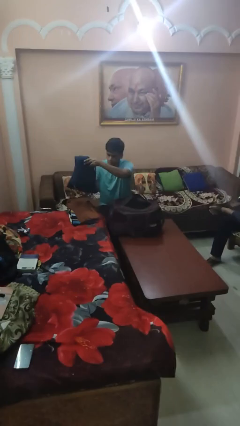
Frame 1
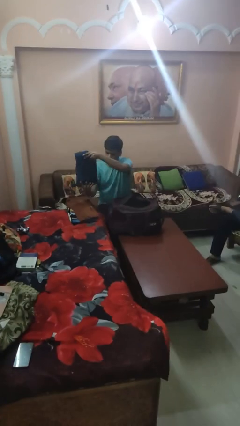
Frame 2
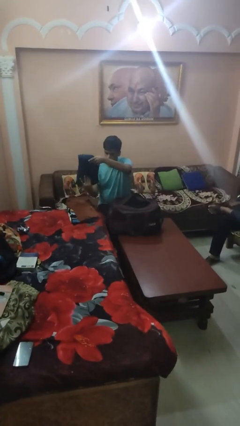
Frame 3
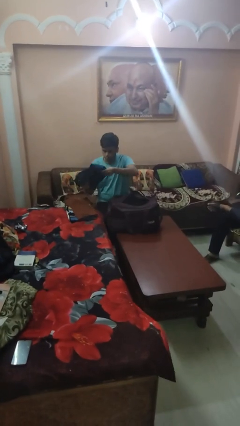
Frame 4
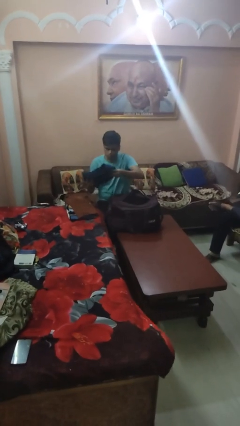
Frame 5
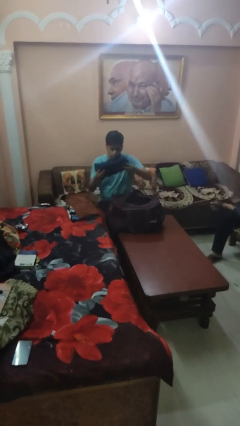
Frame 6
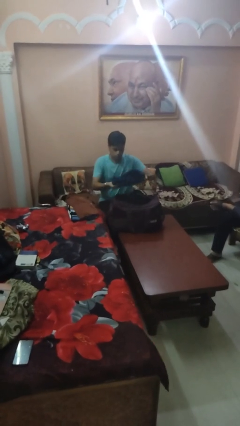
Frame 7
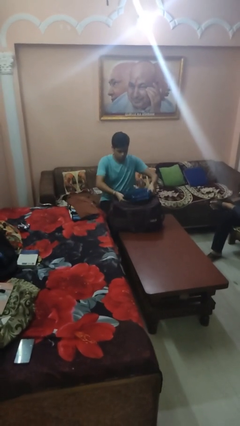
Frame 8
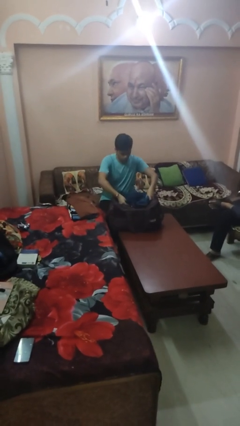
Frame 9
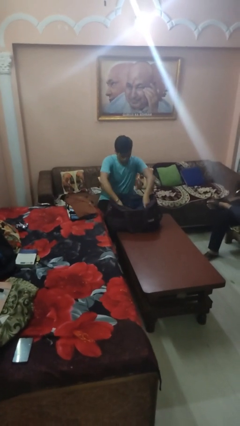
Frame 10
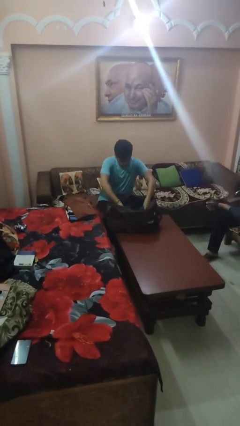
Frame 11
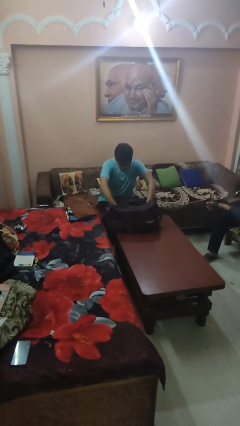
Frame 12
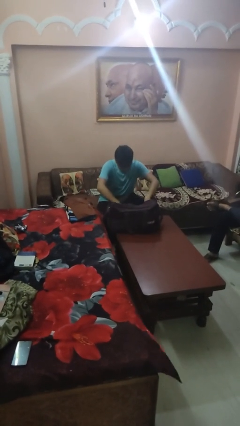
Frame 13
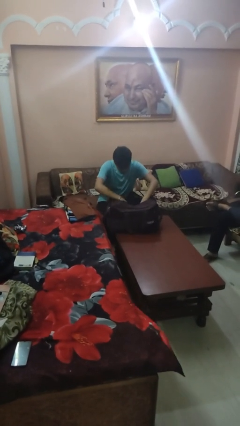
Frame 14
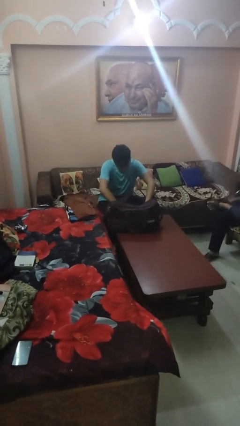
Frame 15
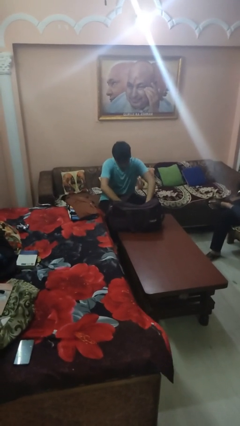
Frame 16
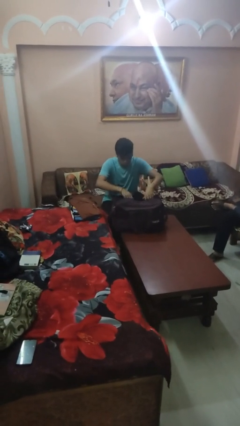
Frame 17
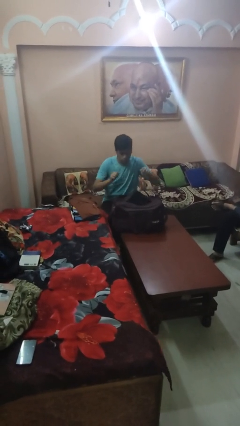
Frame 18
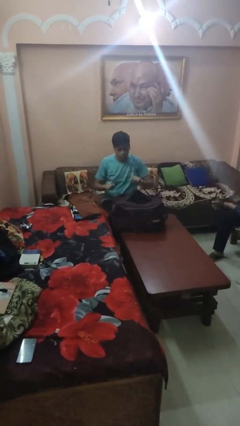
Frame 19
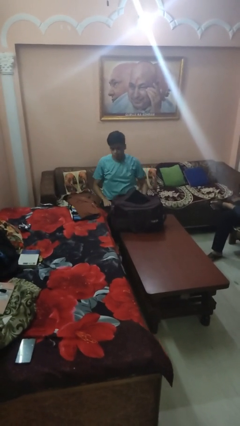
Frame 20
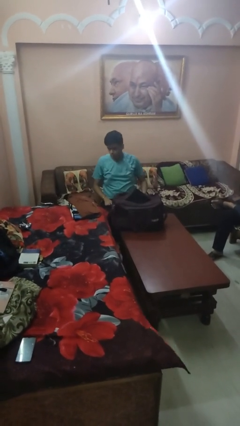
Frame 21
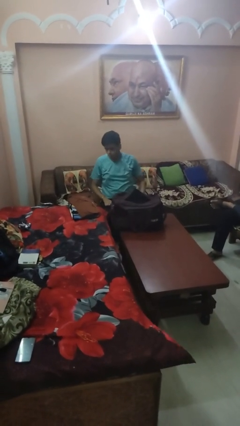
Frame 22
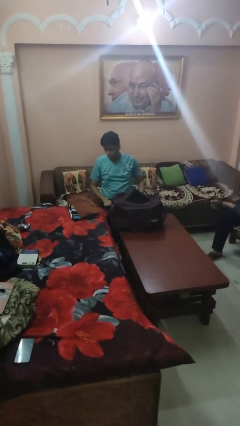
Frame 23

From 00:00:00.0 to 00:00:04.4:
person loads clothes into suitcase

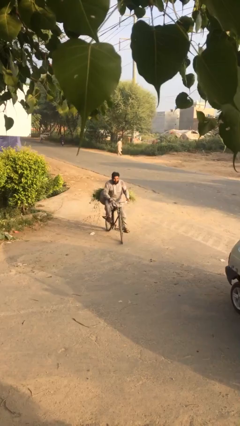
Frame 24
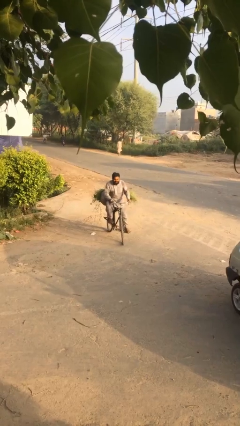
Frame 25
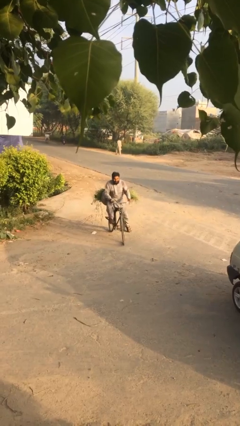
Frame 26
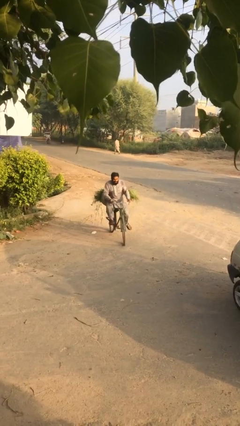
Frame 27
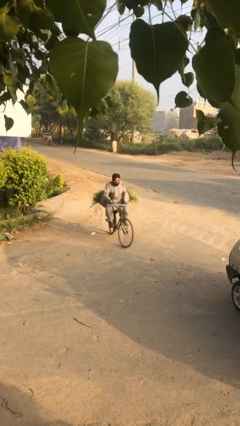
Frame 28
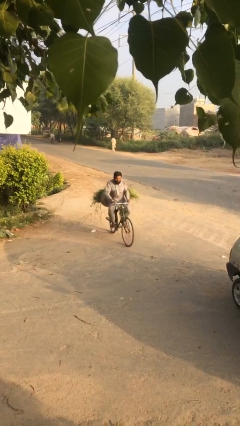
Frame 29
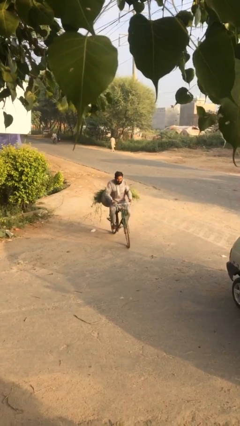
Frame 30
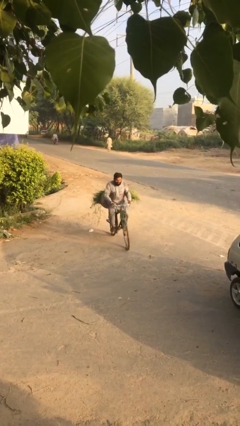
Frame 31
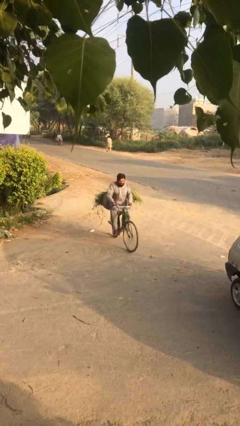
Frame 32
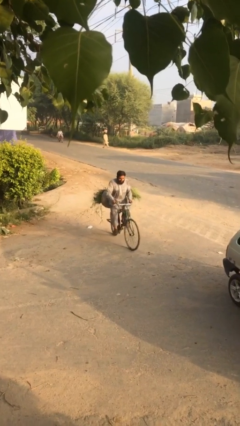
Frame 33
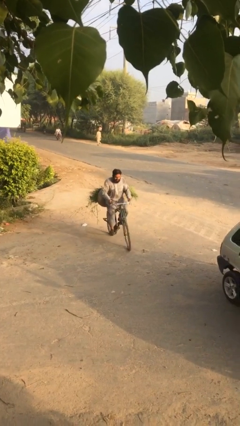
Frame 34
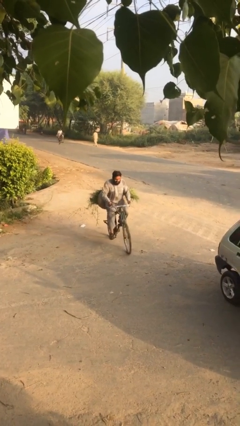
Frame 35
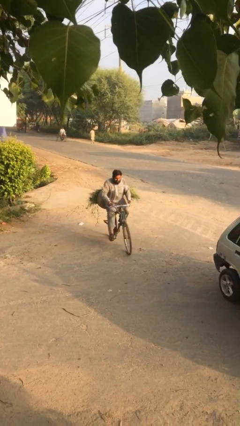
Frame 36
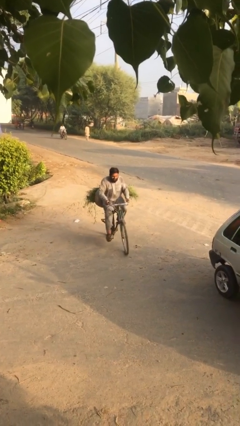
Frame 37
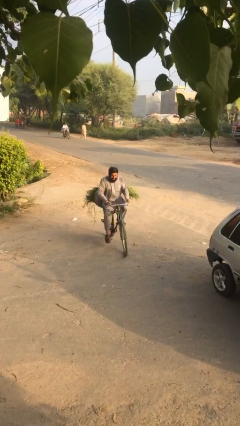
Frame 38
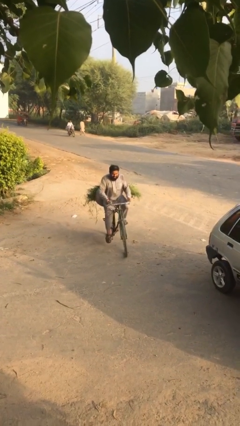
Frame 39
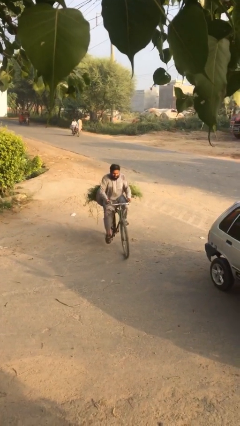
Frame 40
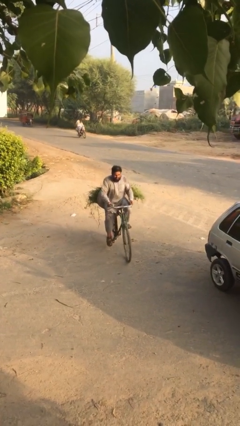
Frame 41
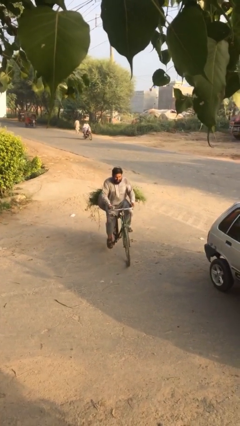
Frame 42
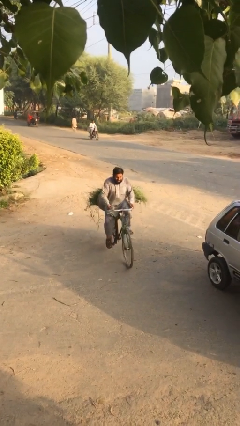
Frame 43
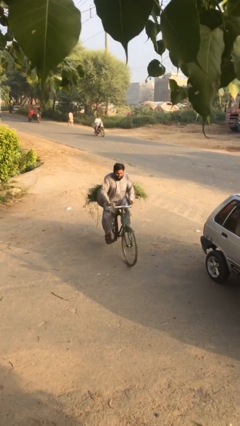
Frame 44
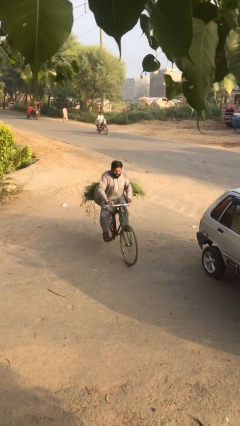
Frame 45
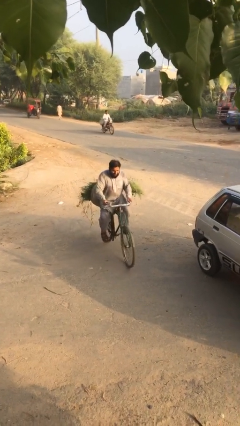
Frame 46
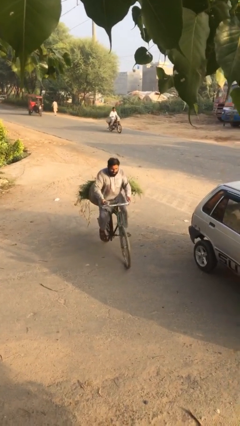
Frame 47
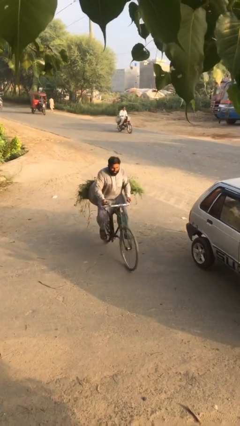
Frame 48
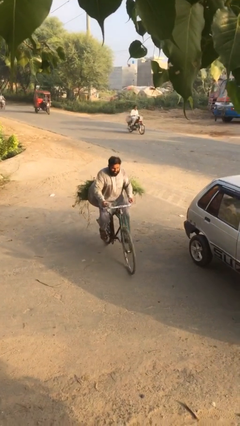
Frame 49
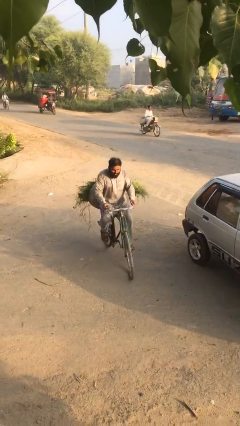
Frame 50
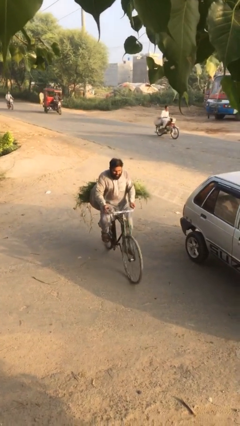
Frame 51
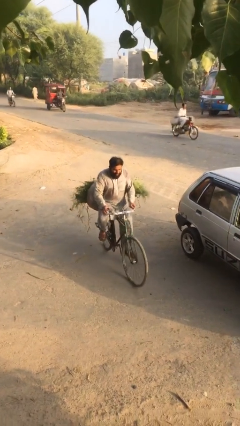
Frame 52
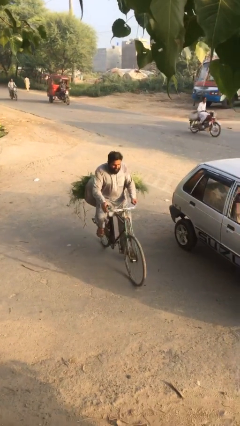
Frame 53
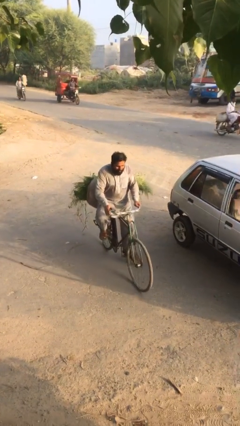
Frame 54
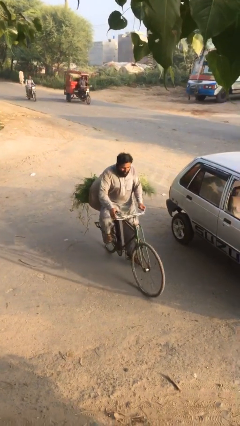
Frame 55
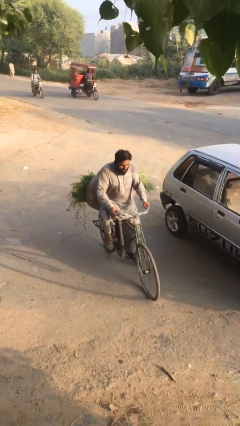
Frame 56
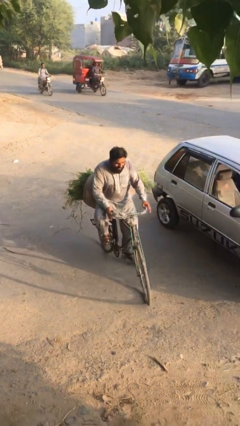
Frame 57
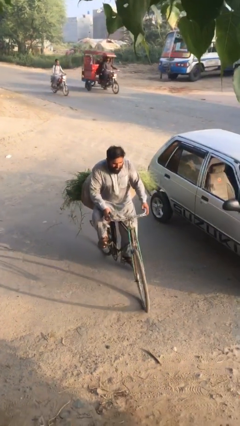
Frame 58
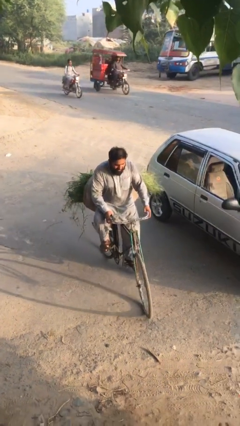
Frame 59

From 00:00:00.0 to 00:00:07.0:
person rides bicycle

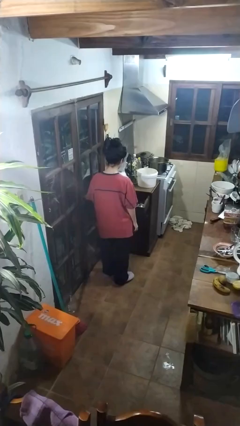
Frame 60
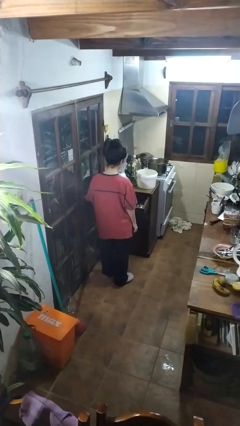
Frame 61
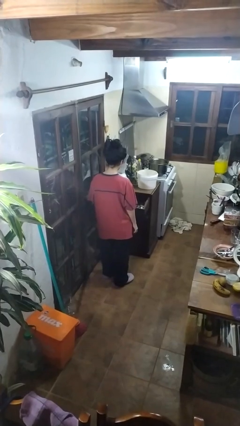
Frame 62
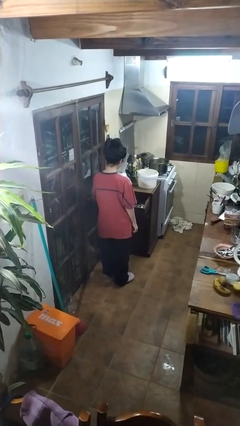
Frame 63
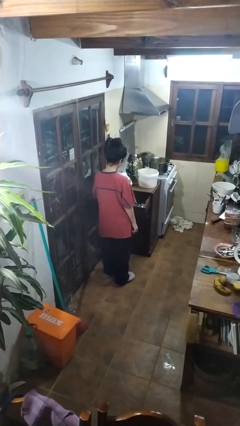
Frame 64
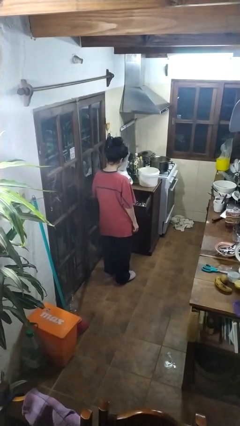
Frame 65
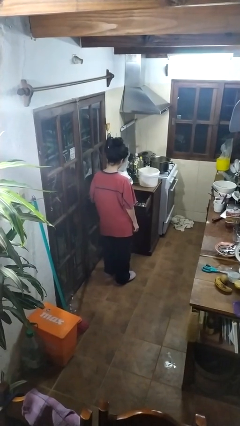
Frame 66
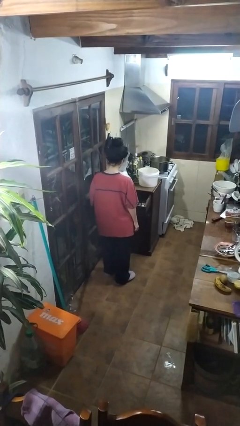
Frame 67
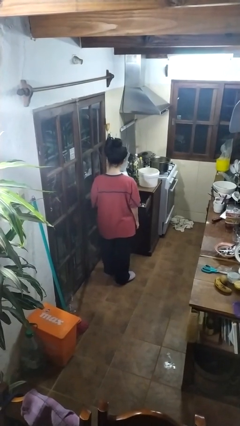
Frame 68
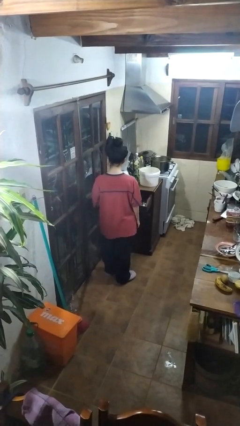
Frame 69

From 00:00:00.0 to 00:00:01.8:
person takes object from kitchen drawer

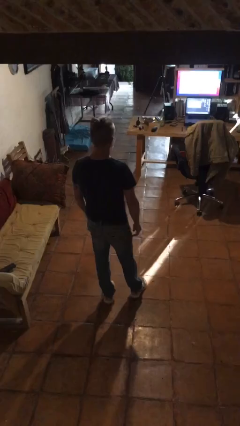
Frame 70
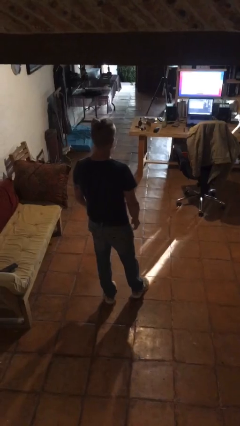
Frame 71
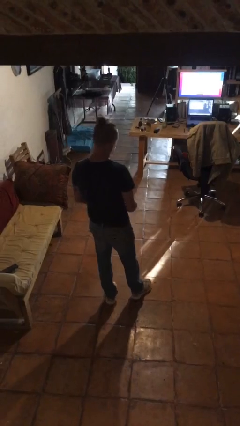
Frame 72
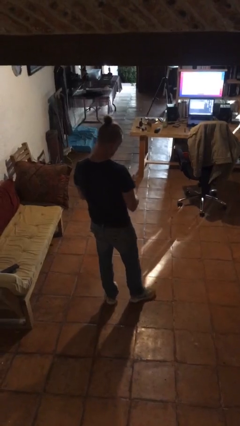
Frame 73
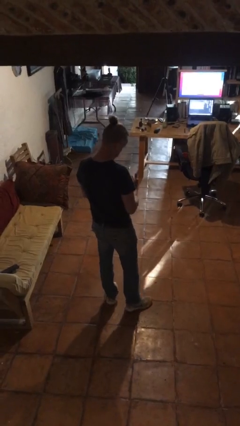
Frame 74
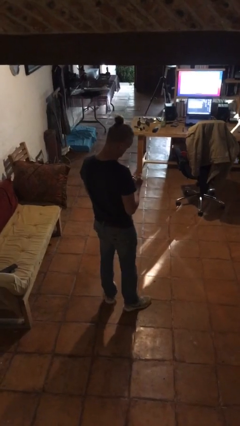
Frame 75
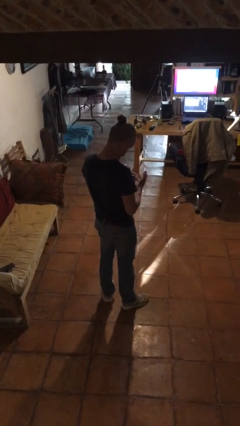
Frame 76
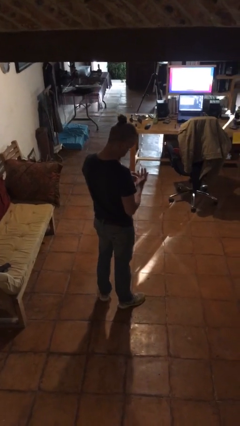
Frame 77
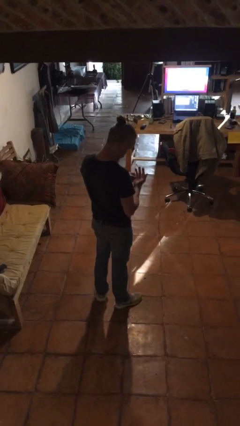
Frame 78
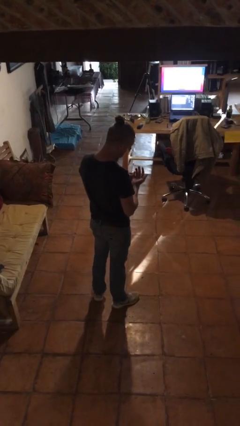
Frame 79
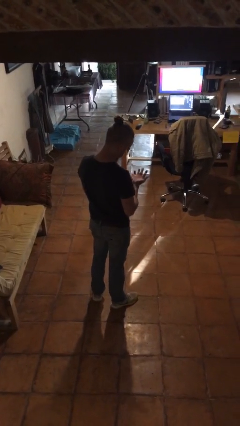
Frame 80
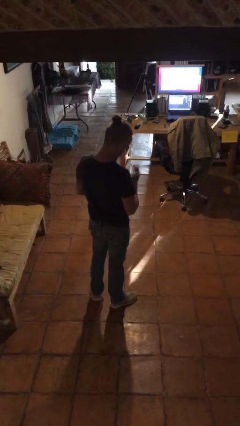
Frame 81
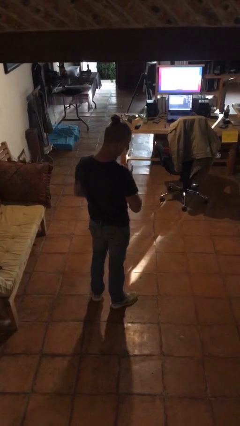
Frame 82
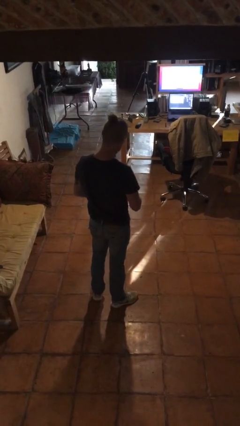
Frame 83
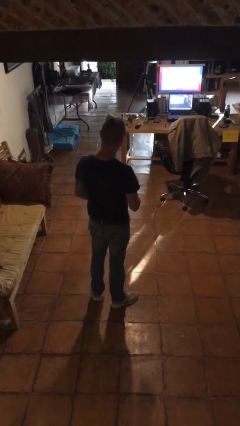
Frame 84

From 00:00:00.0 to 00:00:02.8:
person puts on ring

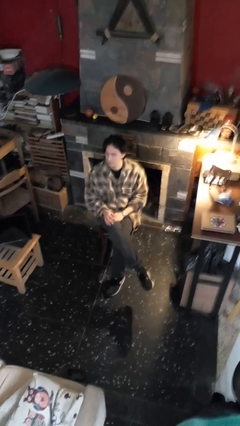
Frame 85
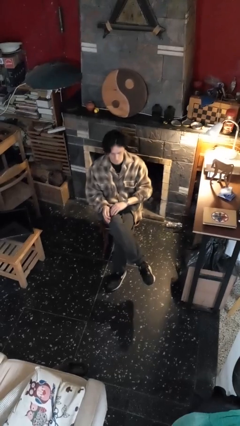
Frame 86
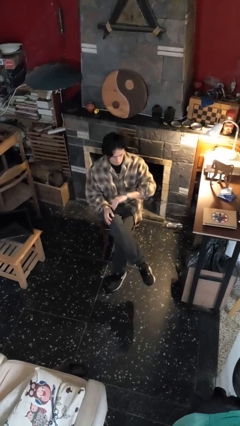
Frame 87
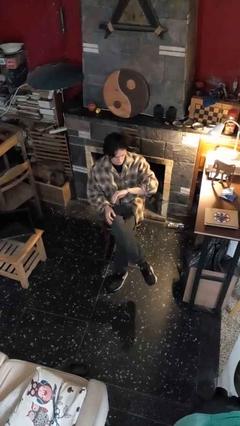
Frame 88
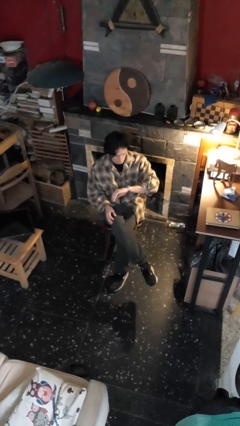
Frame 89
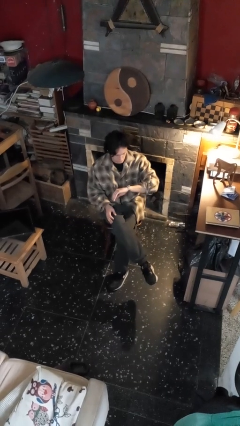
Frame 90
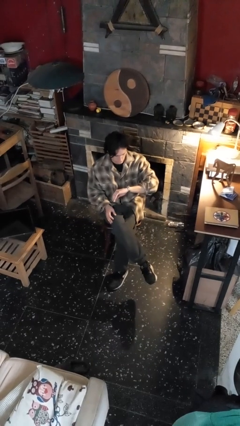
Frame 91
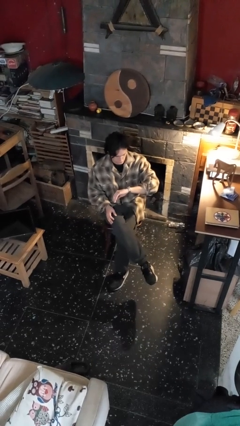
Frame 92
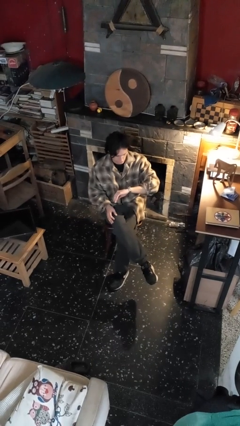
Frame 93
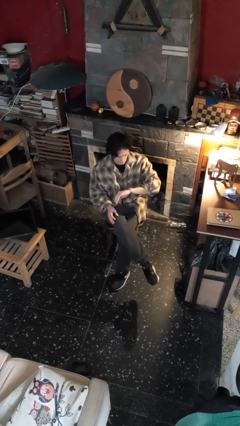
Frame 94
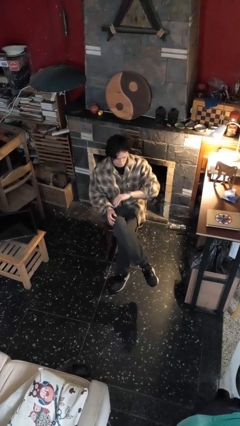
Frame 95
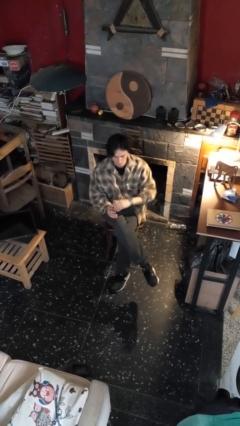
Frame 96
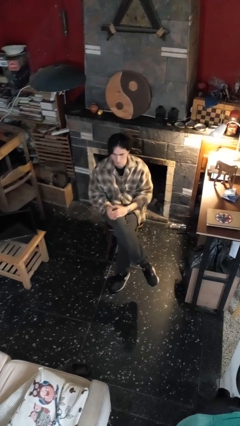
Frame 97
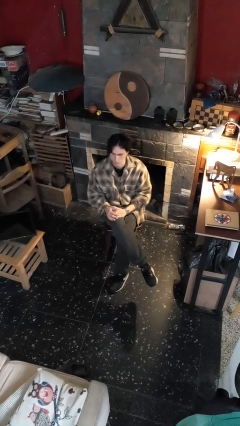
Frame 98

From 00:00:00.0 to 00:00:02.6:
person looks at wristwatch
